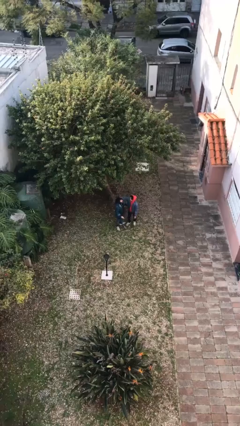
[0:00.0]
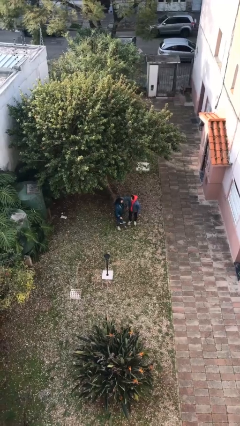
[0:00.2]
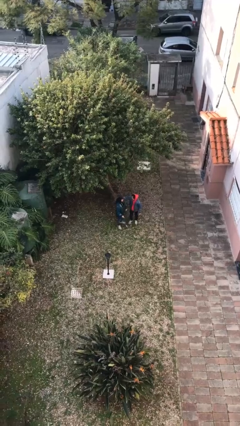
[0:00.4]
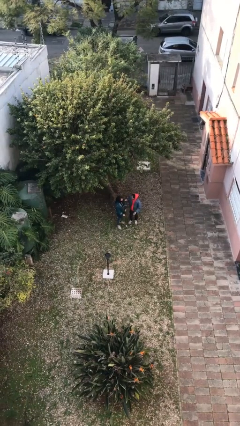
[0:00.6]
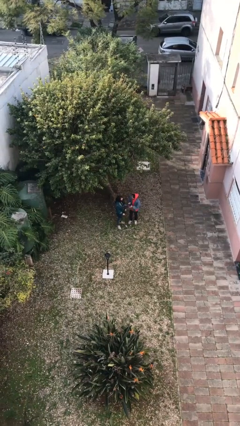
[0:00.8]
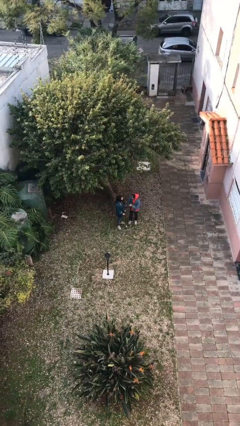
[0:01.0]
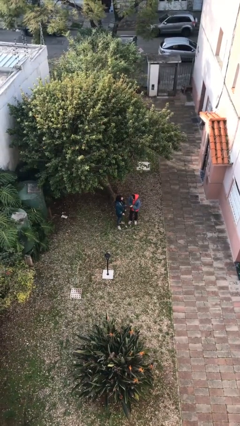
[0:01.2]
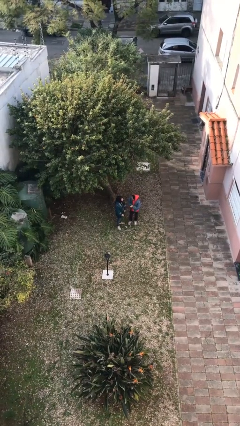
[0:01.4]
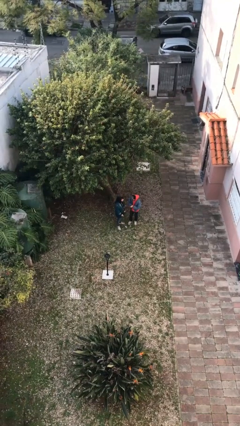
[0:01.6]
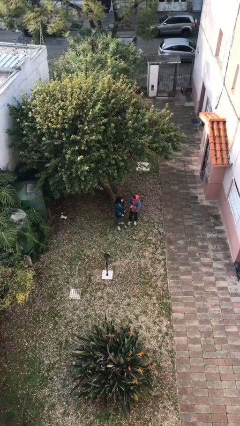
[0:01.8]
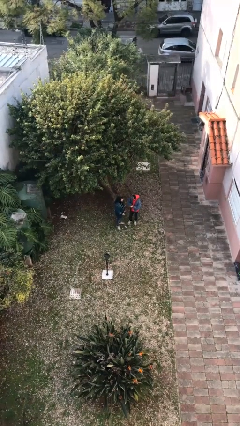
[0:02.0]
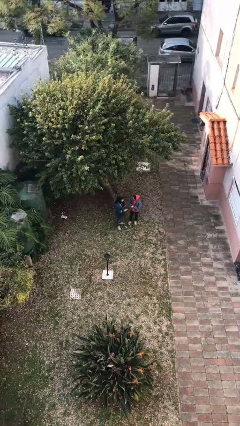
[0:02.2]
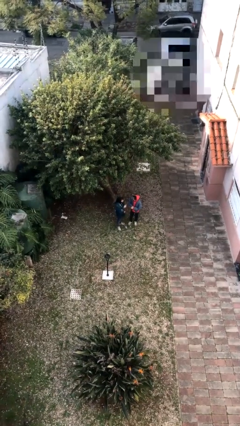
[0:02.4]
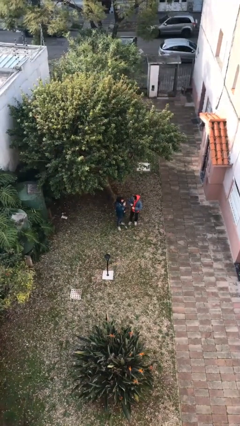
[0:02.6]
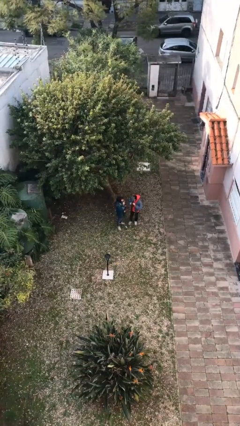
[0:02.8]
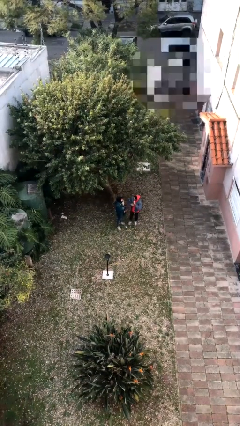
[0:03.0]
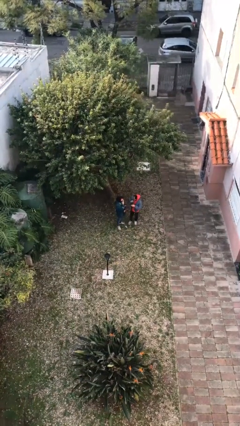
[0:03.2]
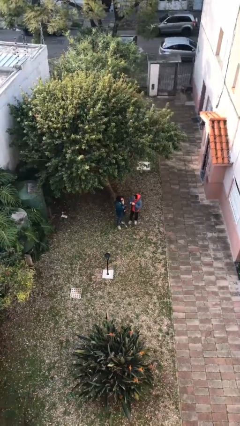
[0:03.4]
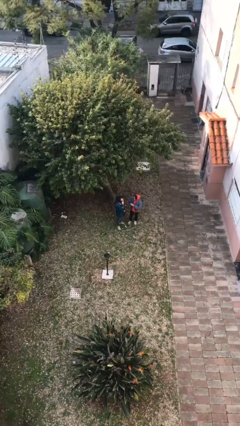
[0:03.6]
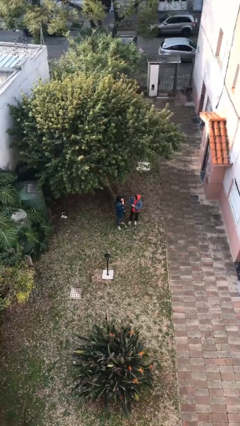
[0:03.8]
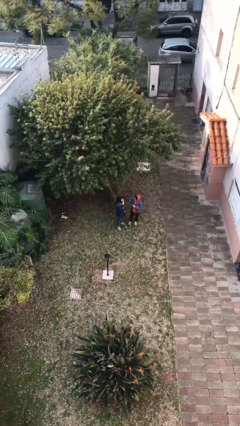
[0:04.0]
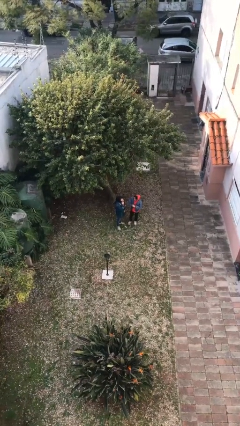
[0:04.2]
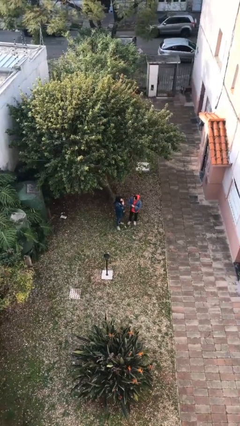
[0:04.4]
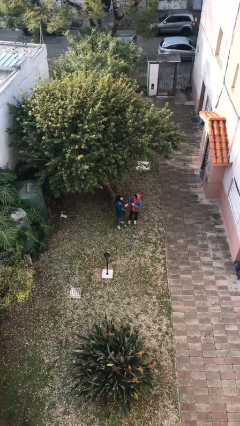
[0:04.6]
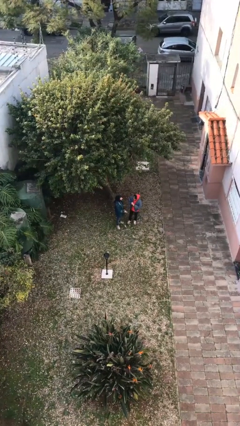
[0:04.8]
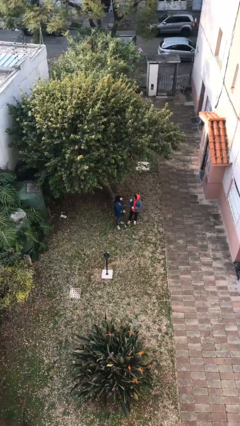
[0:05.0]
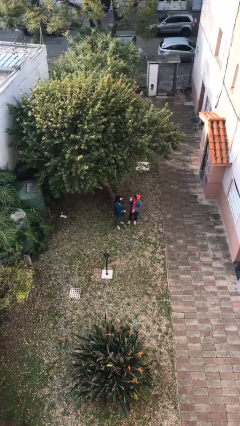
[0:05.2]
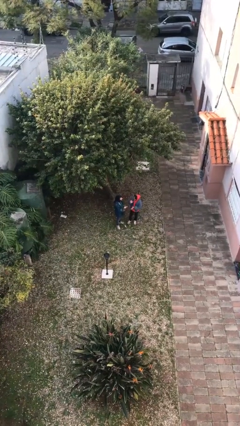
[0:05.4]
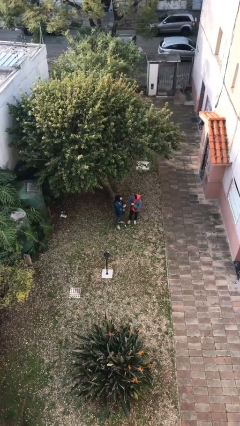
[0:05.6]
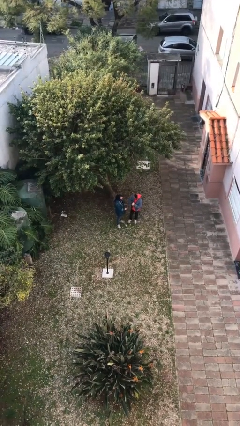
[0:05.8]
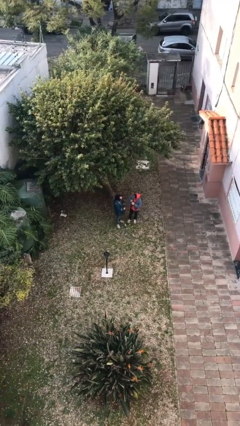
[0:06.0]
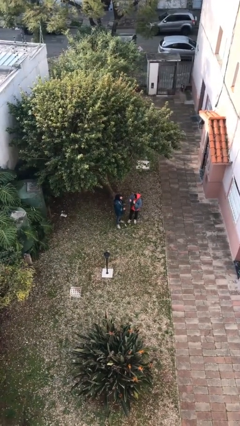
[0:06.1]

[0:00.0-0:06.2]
person talks to person

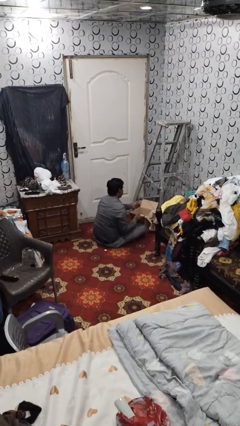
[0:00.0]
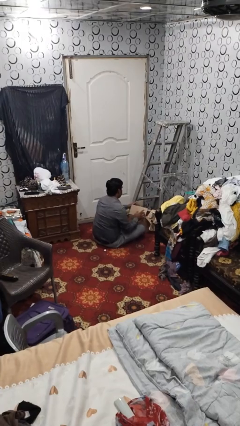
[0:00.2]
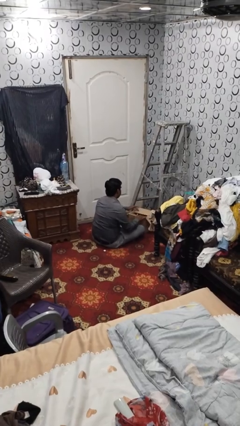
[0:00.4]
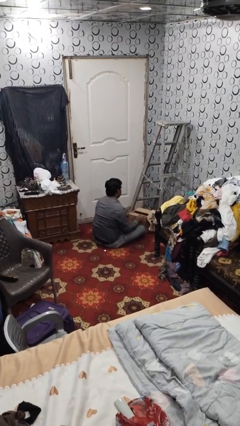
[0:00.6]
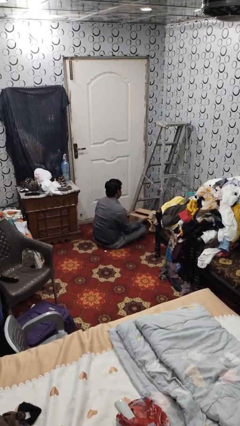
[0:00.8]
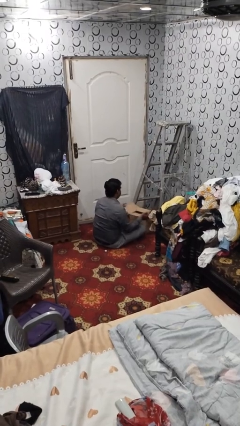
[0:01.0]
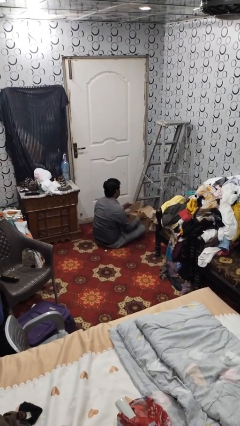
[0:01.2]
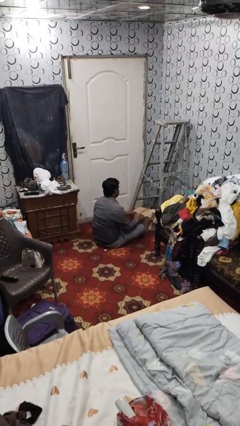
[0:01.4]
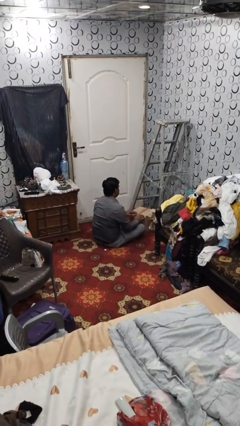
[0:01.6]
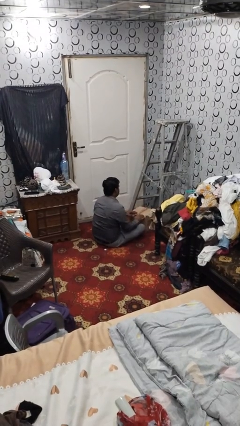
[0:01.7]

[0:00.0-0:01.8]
person closes box

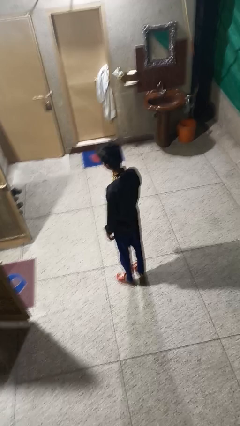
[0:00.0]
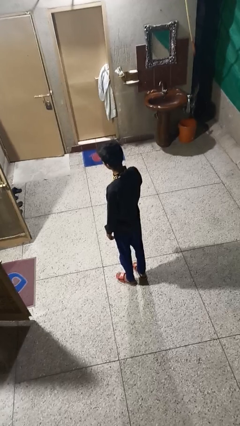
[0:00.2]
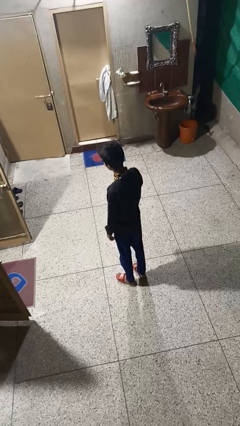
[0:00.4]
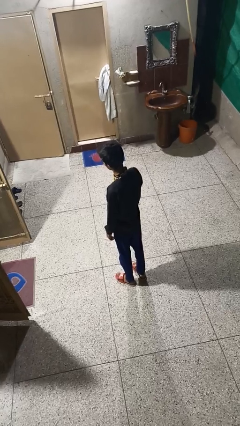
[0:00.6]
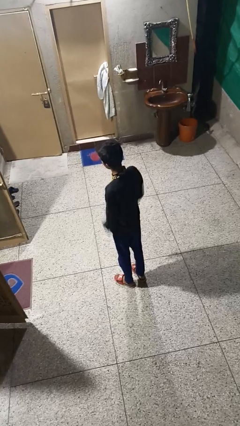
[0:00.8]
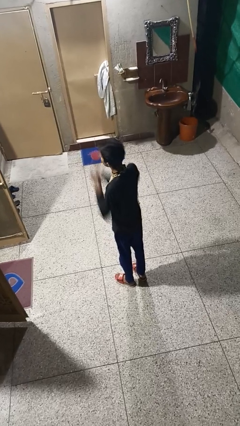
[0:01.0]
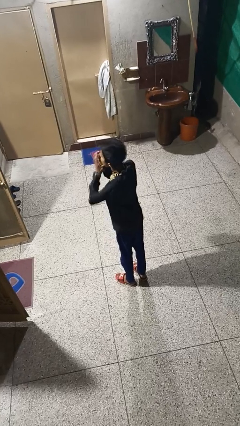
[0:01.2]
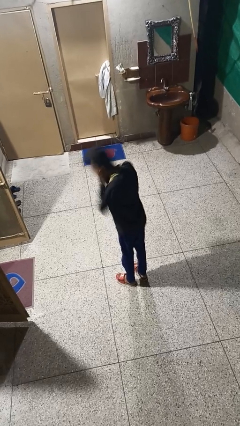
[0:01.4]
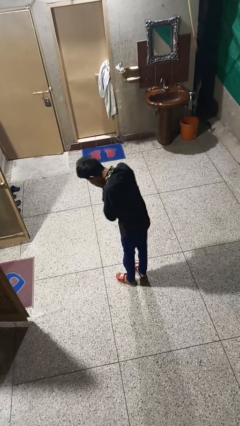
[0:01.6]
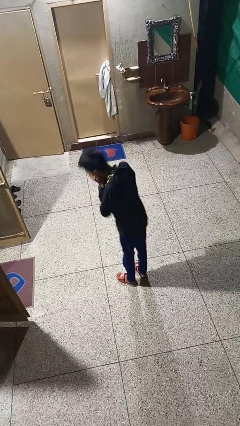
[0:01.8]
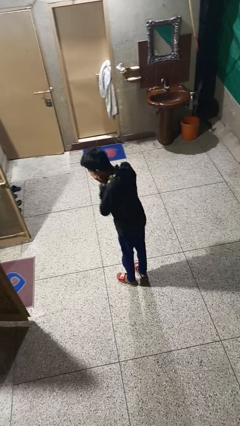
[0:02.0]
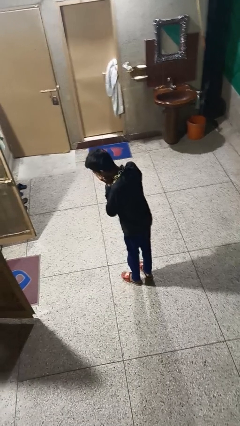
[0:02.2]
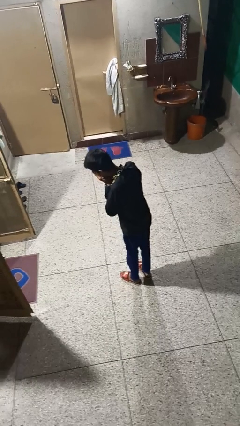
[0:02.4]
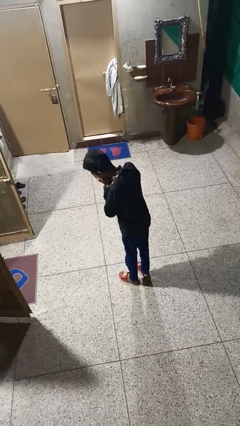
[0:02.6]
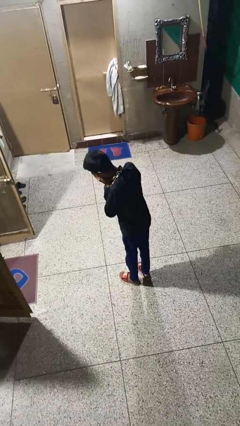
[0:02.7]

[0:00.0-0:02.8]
person sneezes into hand

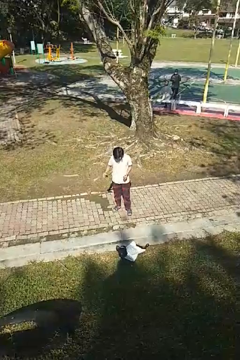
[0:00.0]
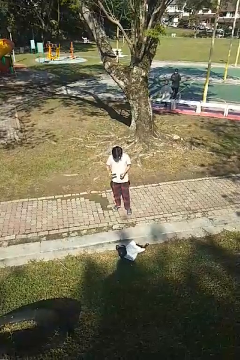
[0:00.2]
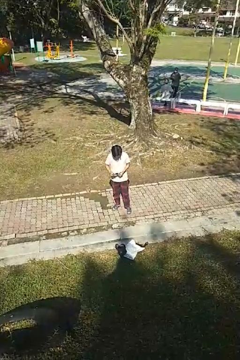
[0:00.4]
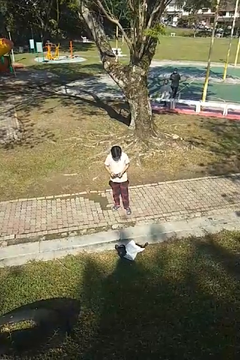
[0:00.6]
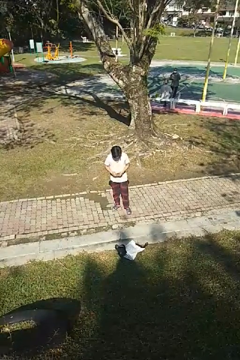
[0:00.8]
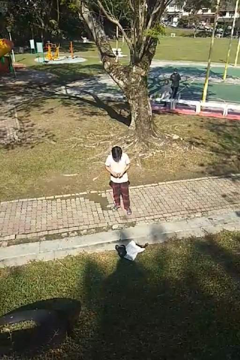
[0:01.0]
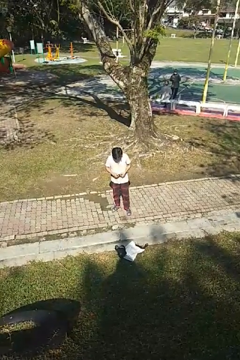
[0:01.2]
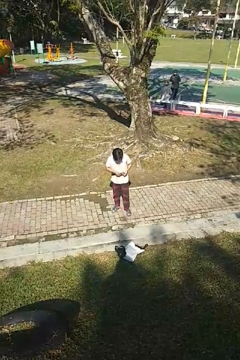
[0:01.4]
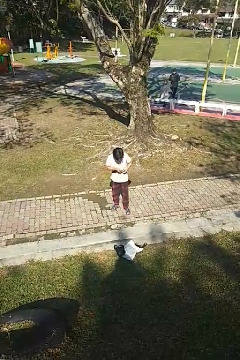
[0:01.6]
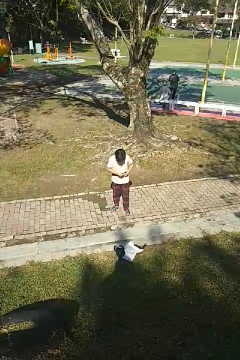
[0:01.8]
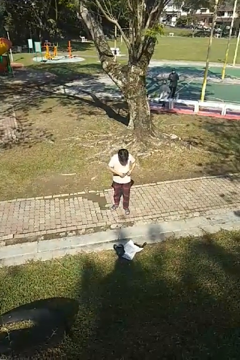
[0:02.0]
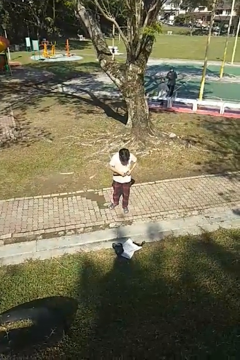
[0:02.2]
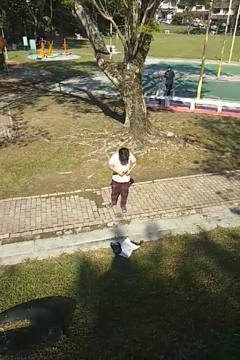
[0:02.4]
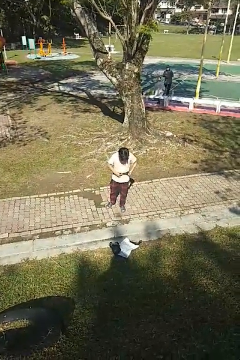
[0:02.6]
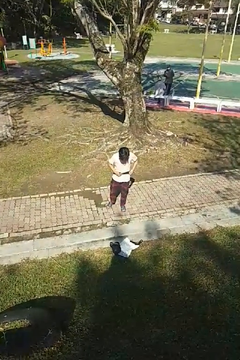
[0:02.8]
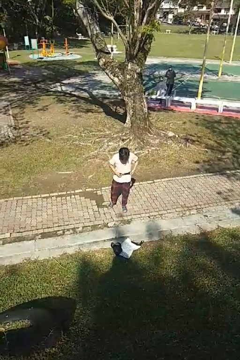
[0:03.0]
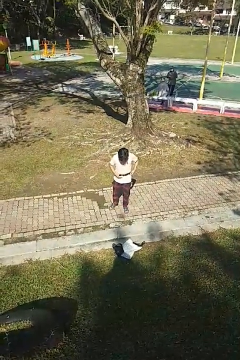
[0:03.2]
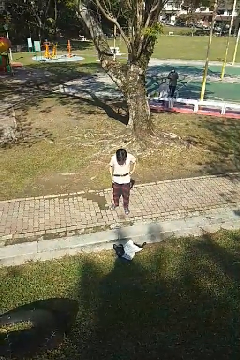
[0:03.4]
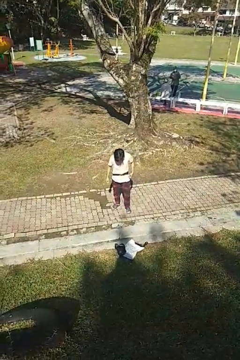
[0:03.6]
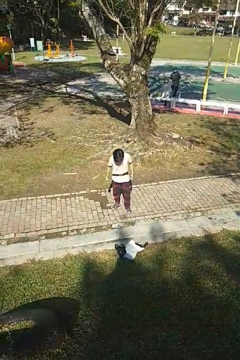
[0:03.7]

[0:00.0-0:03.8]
person puts on belt

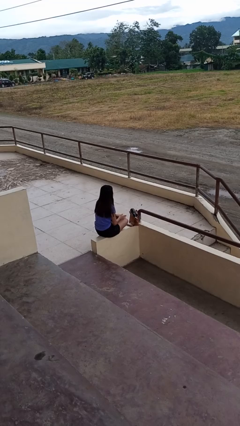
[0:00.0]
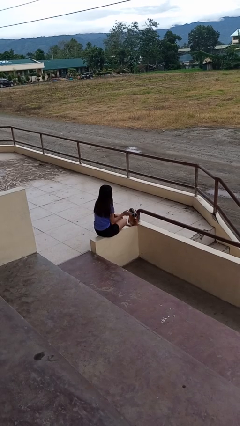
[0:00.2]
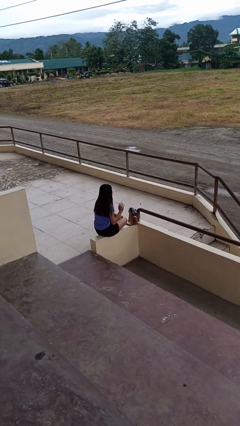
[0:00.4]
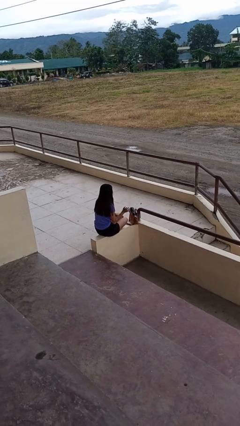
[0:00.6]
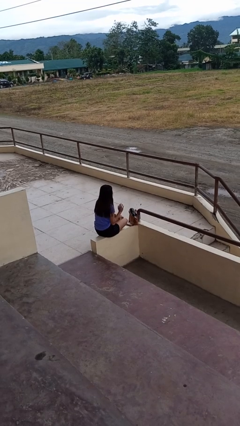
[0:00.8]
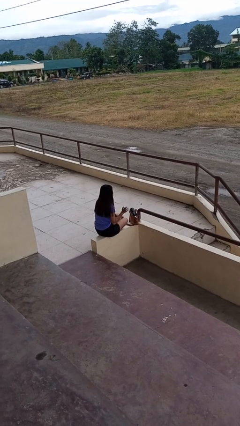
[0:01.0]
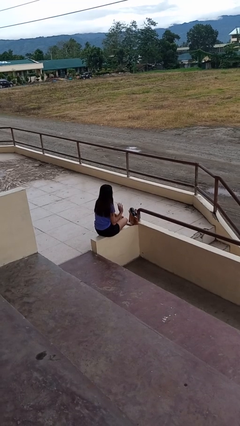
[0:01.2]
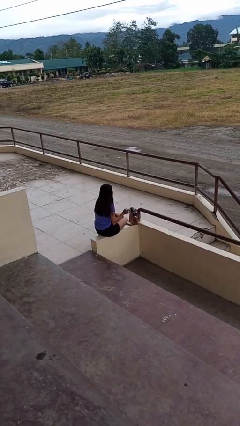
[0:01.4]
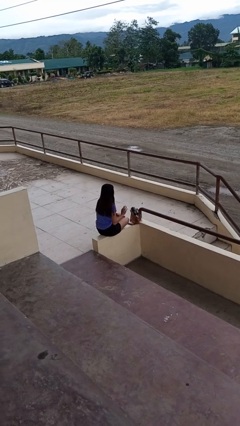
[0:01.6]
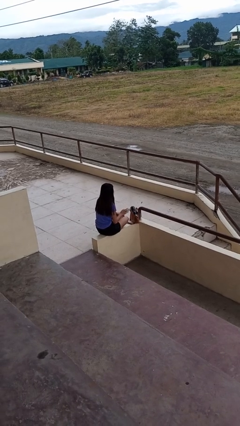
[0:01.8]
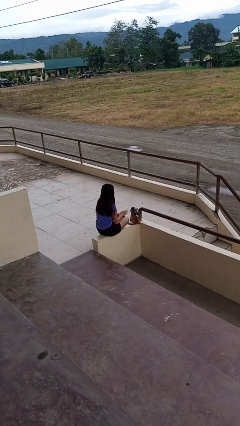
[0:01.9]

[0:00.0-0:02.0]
person waves hand over object

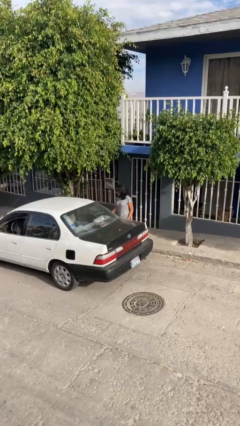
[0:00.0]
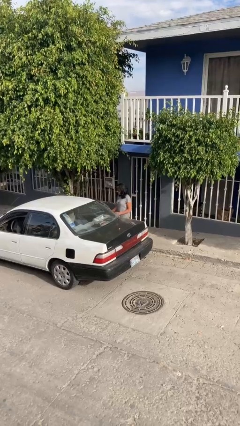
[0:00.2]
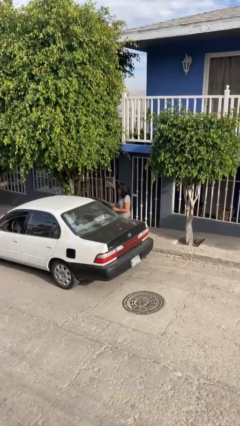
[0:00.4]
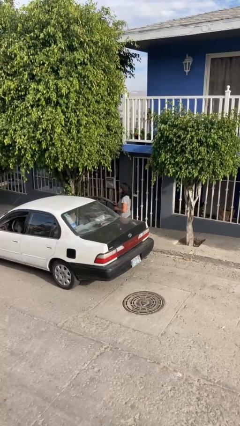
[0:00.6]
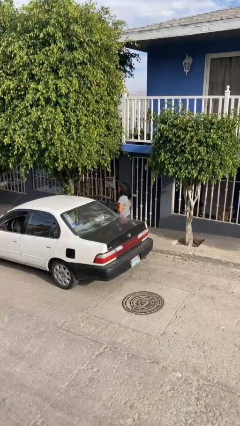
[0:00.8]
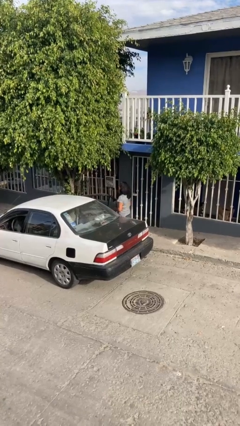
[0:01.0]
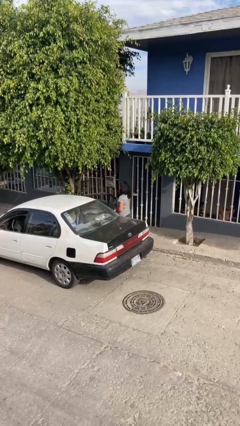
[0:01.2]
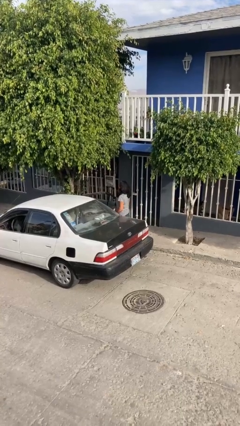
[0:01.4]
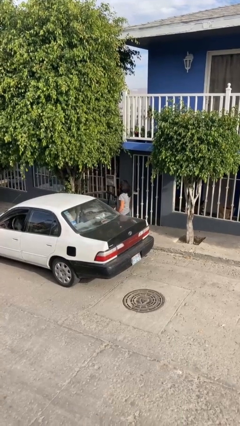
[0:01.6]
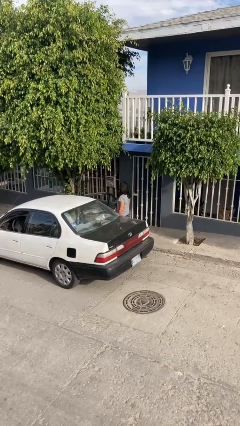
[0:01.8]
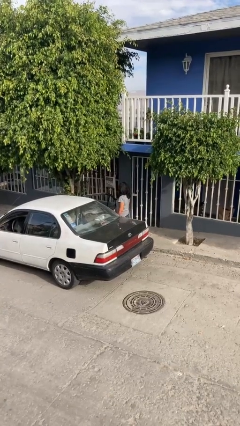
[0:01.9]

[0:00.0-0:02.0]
person opens car door
